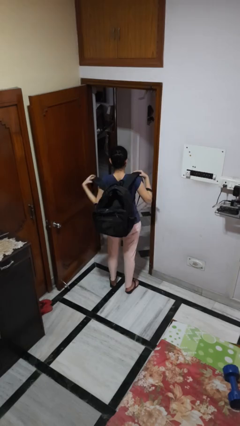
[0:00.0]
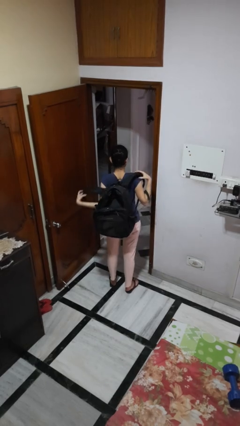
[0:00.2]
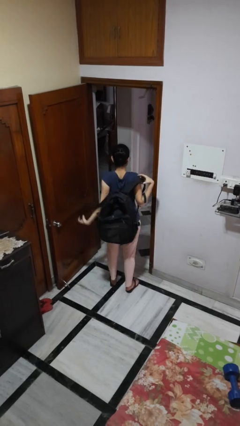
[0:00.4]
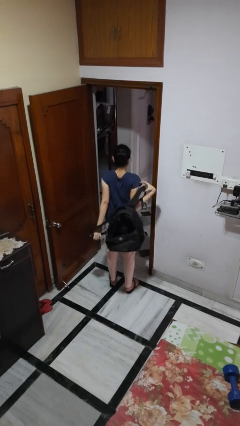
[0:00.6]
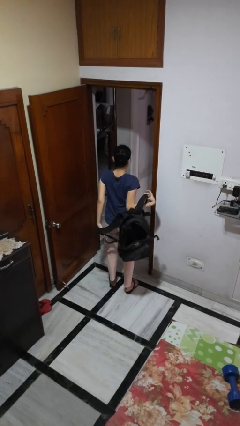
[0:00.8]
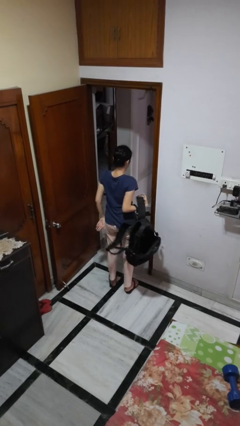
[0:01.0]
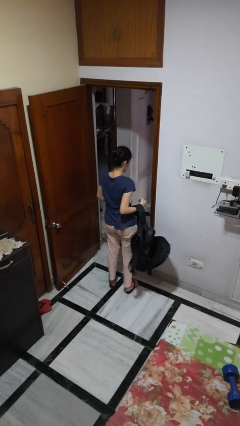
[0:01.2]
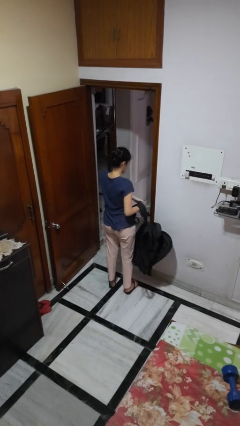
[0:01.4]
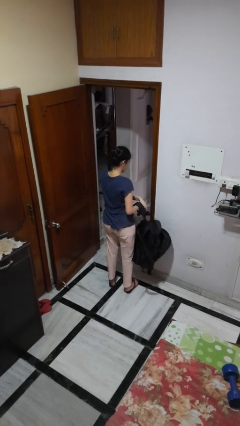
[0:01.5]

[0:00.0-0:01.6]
person takes off backpack

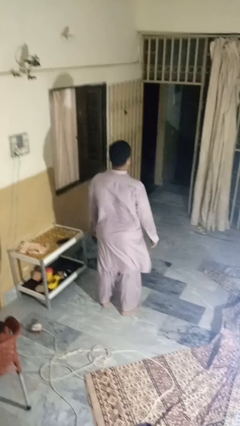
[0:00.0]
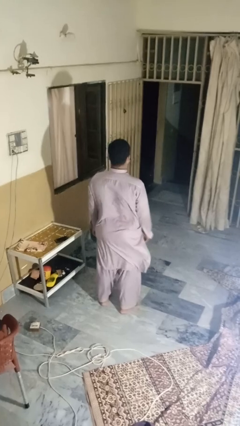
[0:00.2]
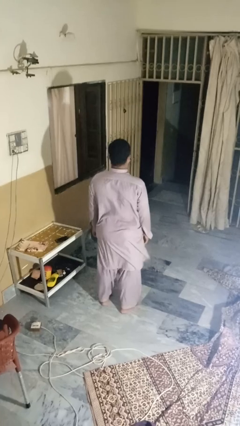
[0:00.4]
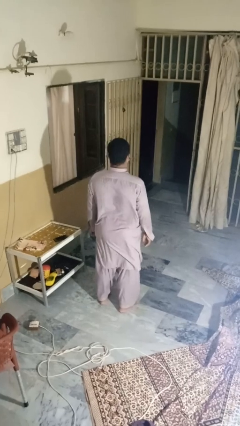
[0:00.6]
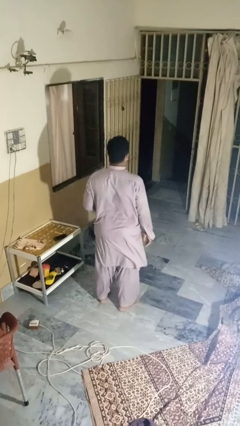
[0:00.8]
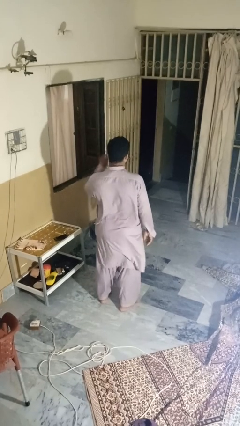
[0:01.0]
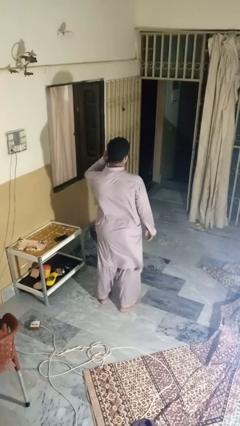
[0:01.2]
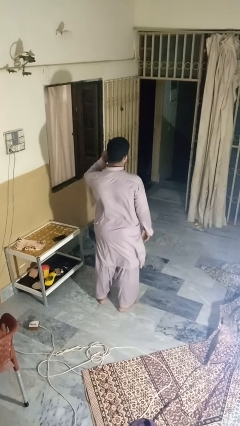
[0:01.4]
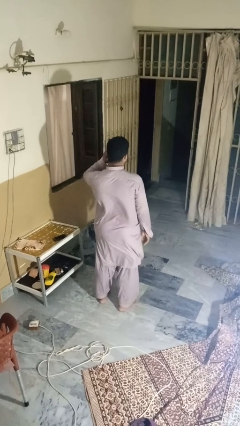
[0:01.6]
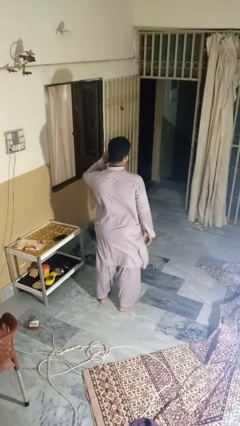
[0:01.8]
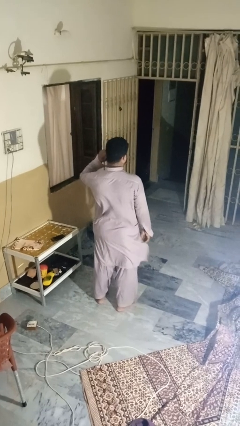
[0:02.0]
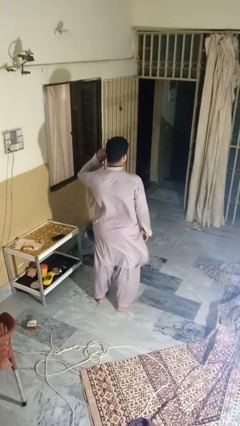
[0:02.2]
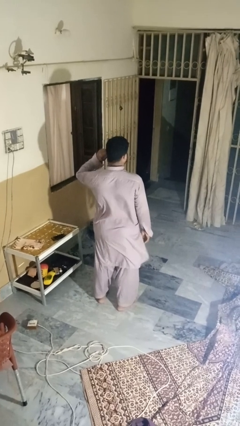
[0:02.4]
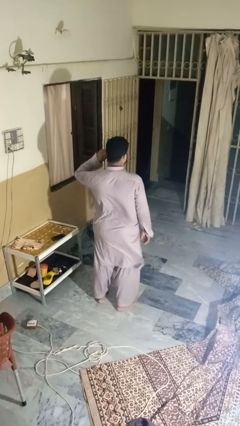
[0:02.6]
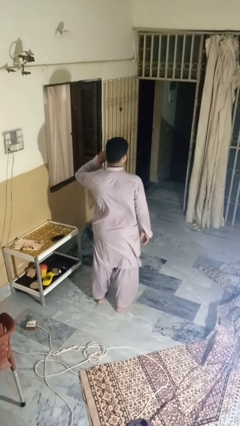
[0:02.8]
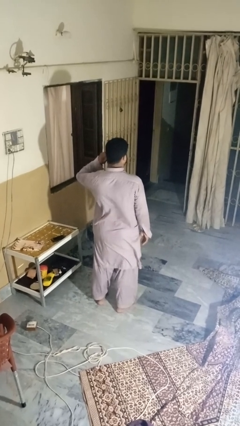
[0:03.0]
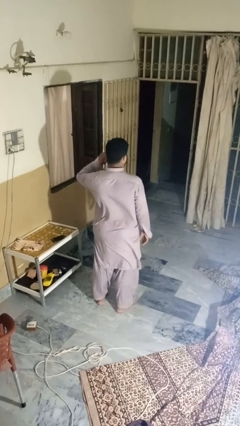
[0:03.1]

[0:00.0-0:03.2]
person touches earlobe

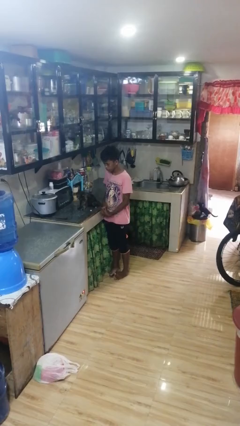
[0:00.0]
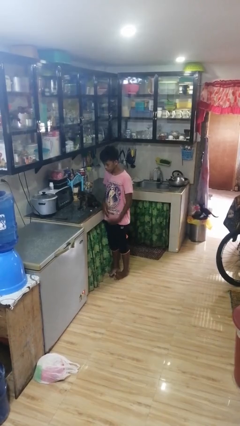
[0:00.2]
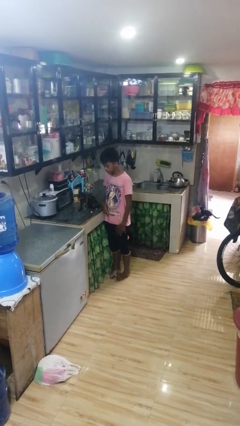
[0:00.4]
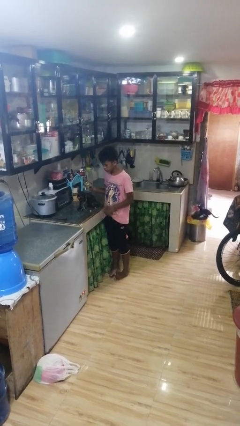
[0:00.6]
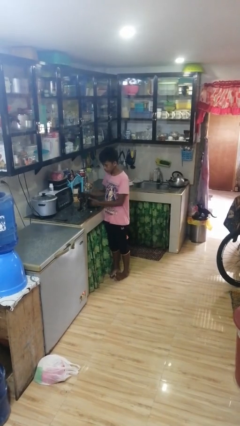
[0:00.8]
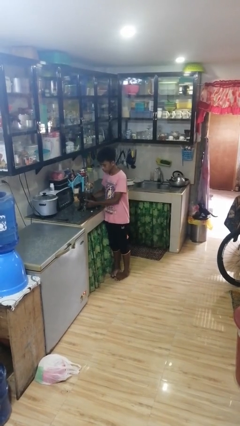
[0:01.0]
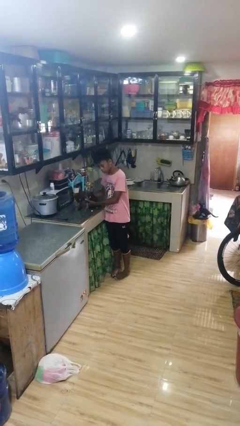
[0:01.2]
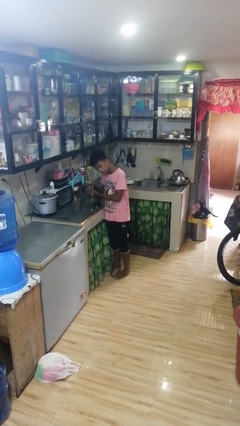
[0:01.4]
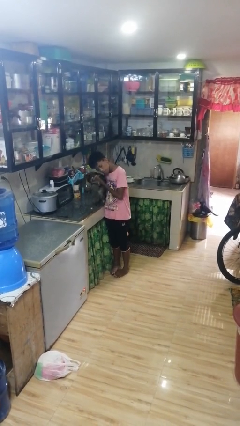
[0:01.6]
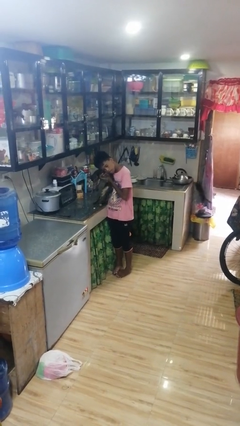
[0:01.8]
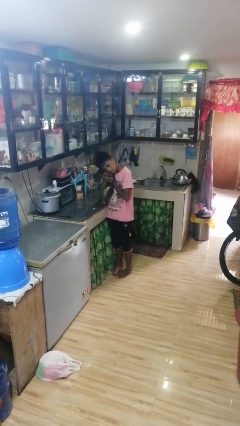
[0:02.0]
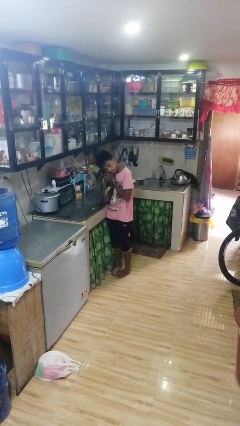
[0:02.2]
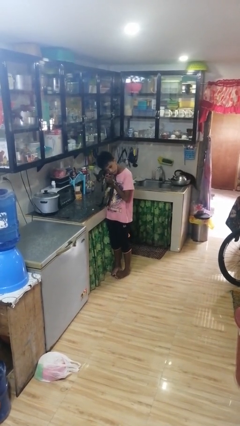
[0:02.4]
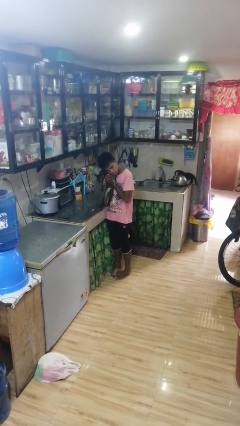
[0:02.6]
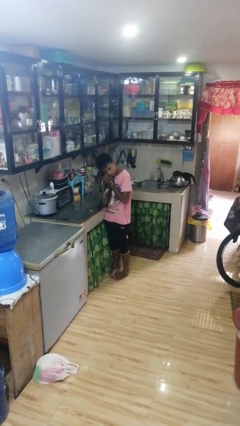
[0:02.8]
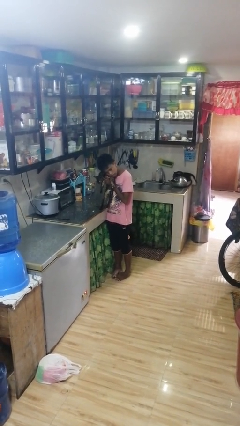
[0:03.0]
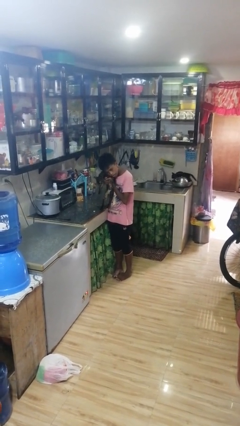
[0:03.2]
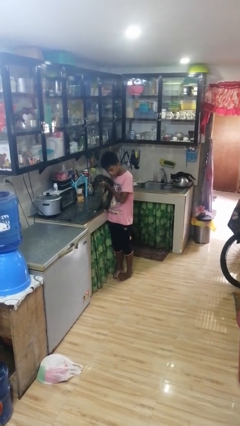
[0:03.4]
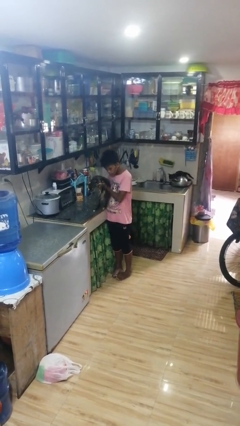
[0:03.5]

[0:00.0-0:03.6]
person hugs cat

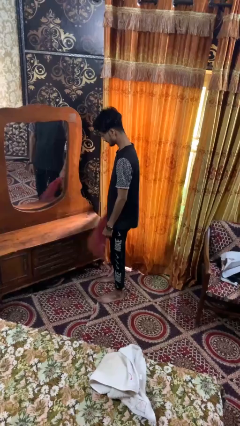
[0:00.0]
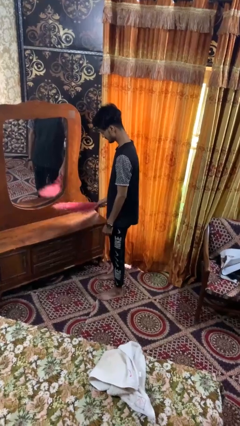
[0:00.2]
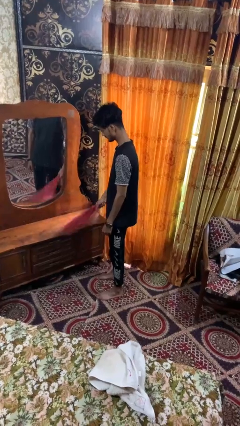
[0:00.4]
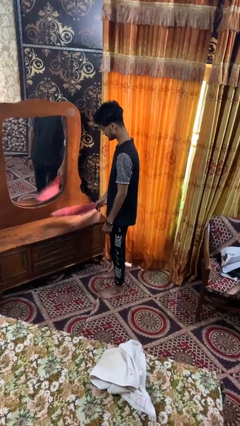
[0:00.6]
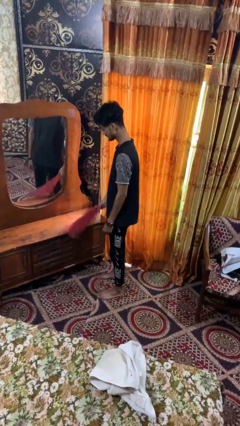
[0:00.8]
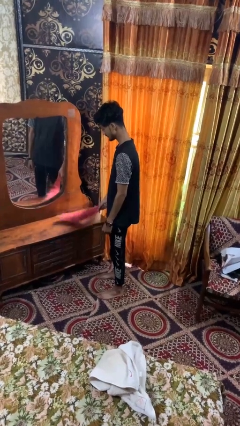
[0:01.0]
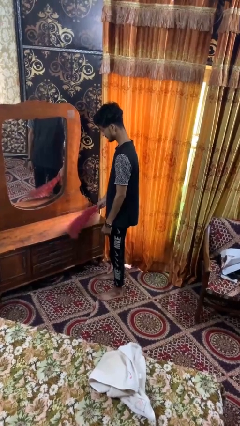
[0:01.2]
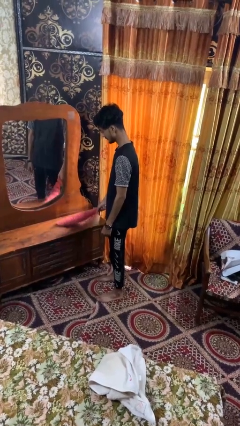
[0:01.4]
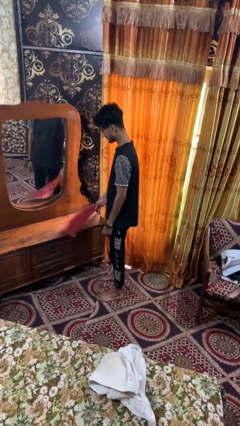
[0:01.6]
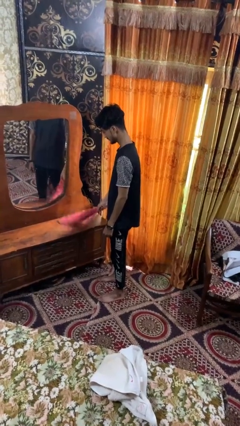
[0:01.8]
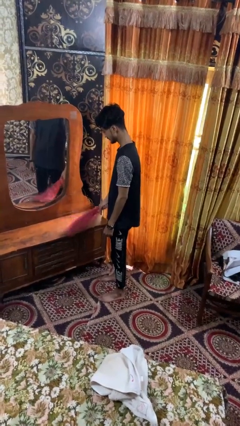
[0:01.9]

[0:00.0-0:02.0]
person dusts furniture

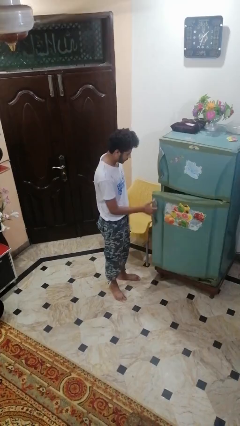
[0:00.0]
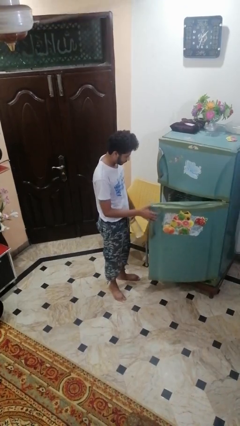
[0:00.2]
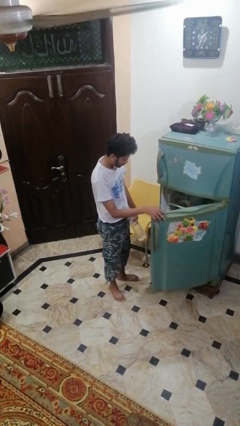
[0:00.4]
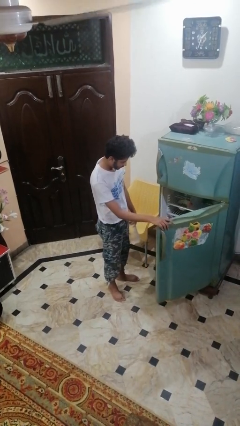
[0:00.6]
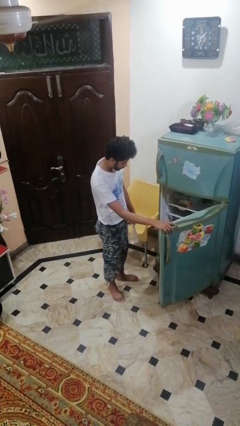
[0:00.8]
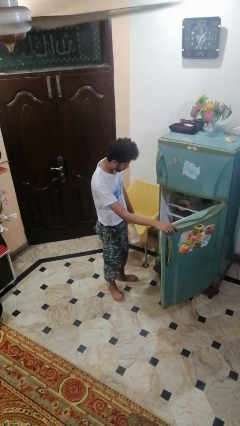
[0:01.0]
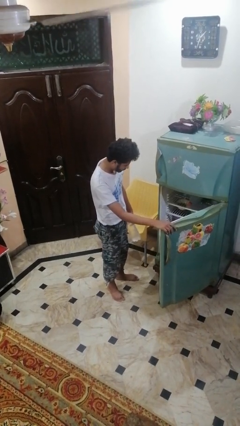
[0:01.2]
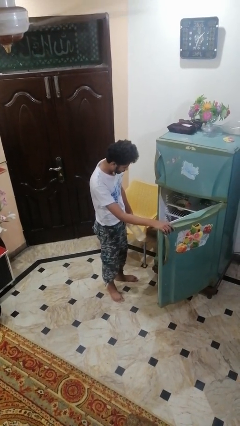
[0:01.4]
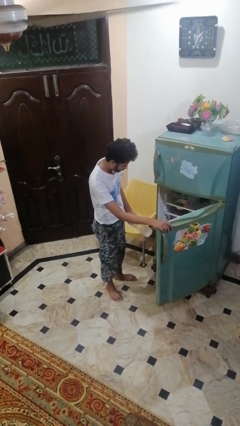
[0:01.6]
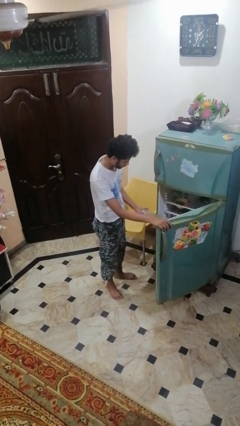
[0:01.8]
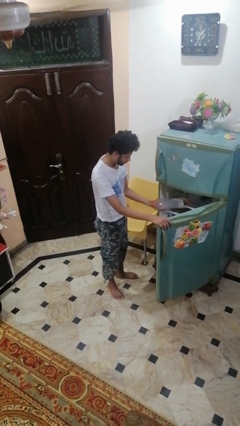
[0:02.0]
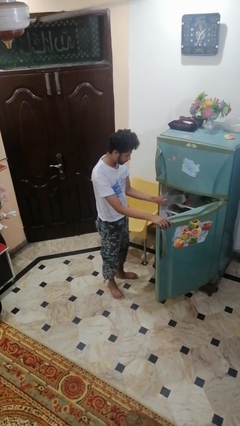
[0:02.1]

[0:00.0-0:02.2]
person opens refrigerator

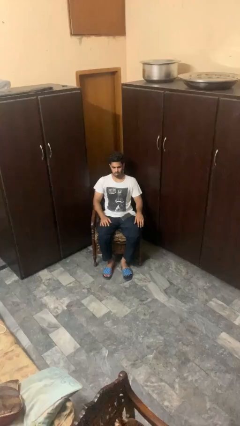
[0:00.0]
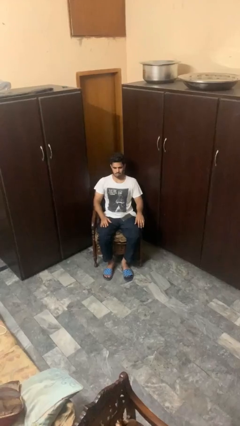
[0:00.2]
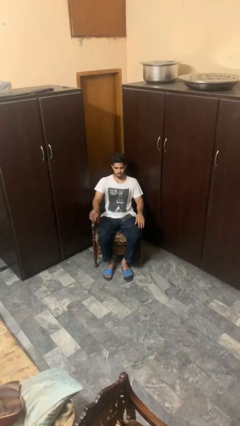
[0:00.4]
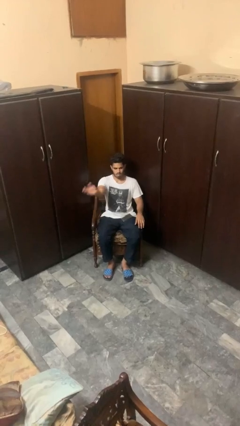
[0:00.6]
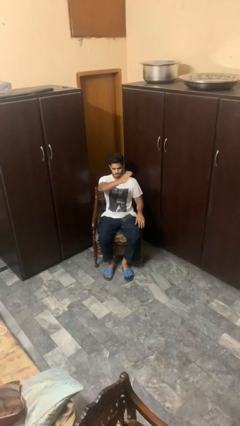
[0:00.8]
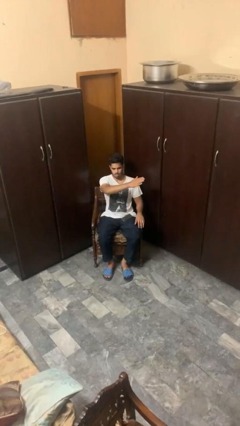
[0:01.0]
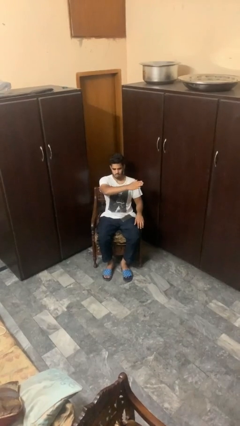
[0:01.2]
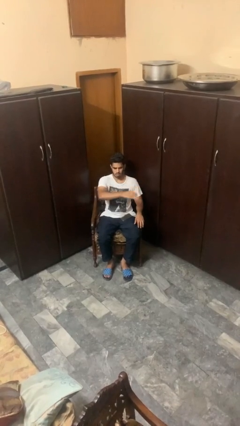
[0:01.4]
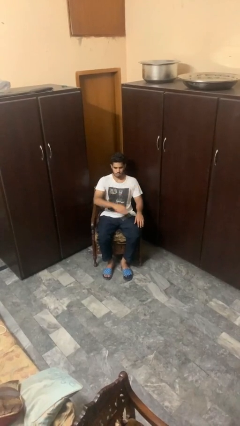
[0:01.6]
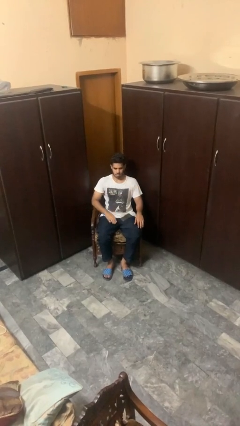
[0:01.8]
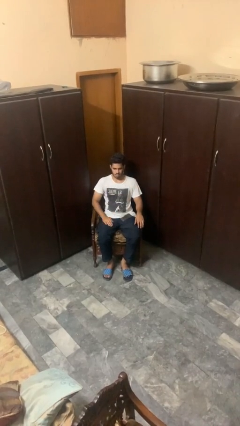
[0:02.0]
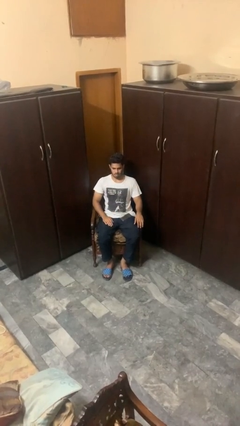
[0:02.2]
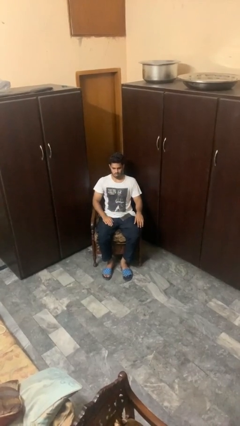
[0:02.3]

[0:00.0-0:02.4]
person gestures swipe left

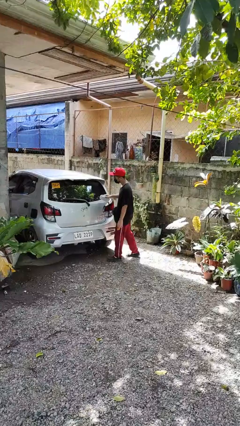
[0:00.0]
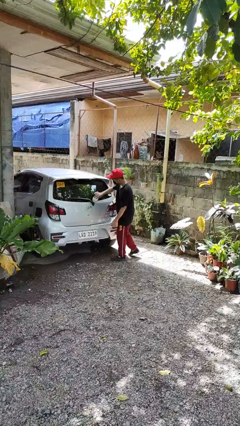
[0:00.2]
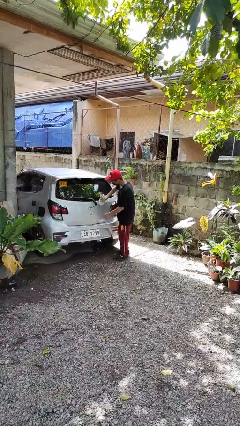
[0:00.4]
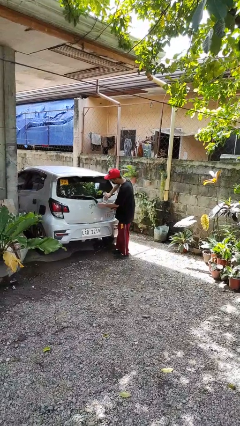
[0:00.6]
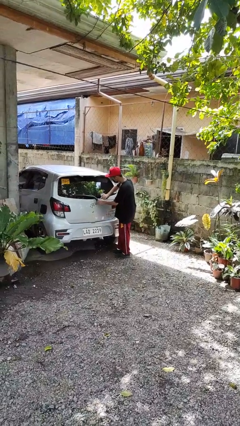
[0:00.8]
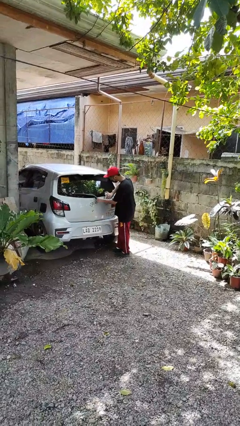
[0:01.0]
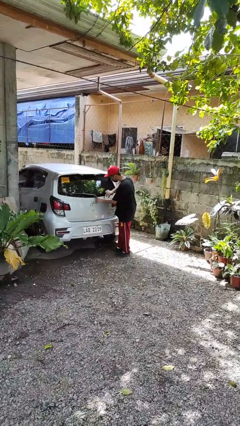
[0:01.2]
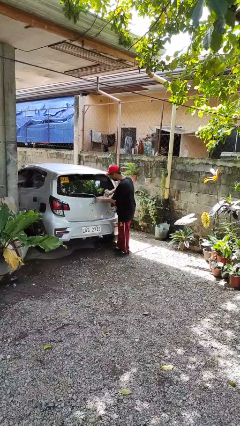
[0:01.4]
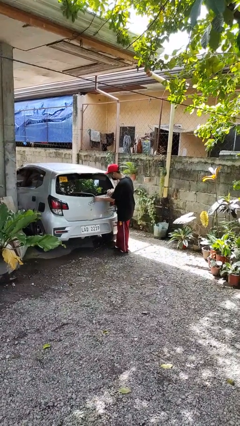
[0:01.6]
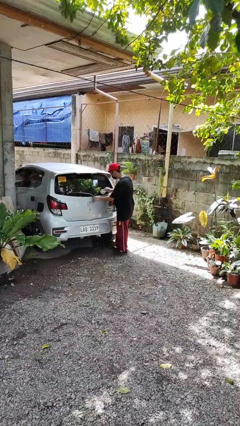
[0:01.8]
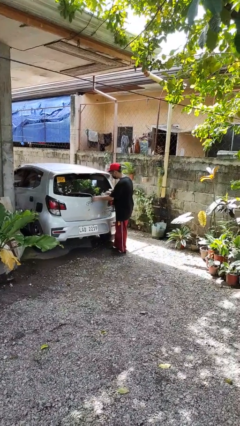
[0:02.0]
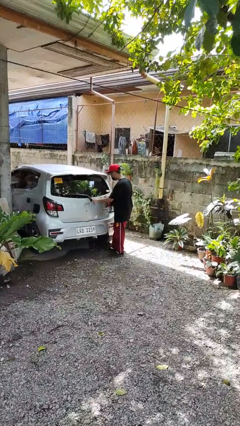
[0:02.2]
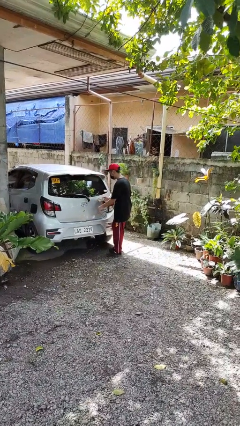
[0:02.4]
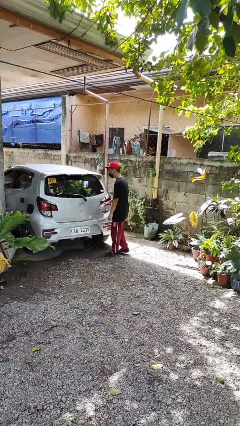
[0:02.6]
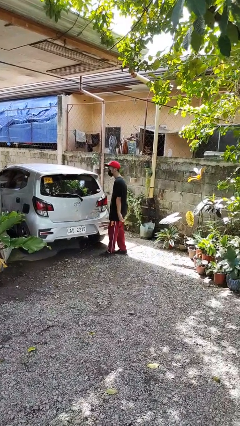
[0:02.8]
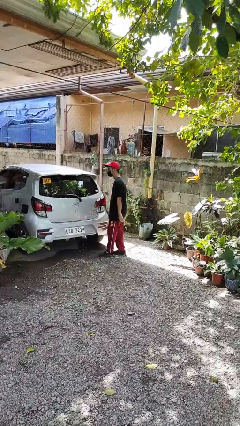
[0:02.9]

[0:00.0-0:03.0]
person polishes car with rag
